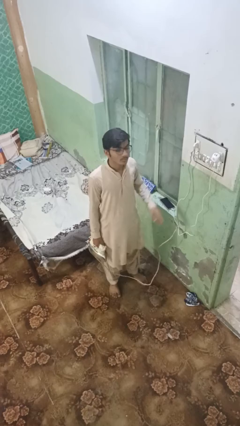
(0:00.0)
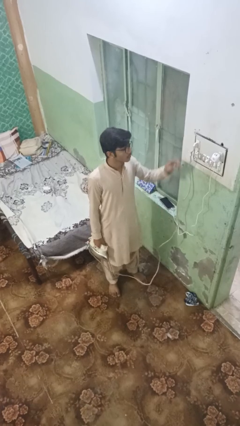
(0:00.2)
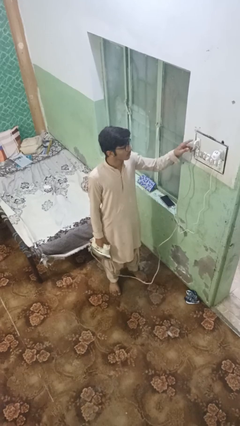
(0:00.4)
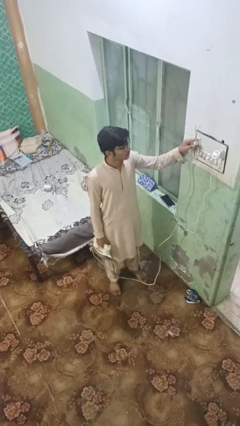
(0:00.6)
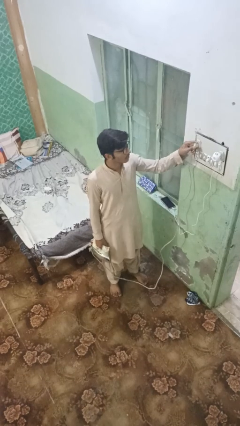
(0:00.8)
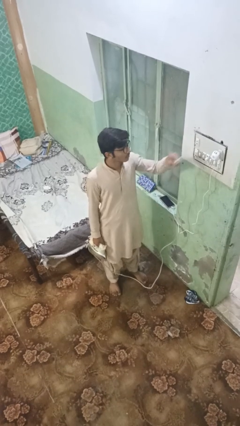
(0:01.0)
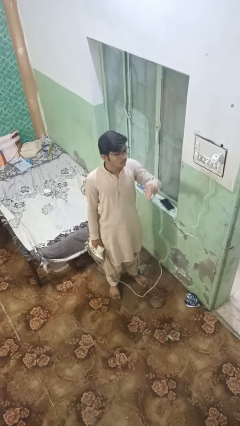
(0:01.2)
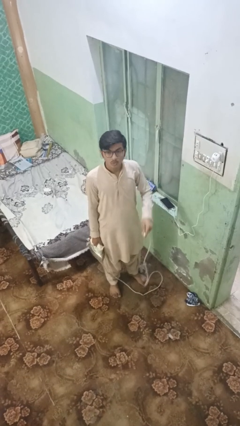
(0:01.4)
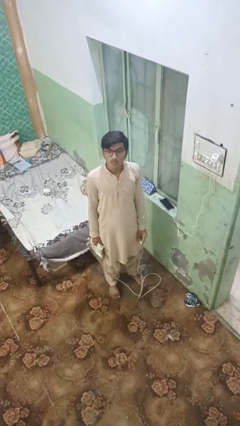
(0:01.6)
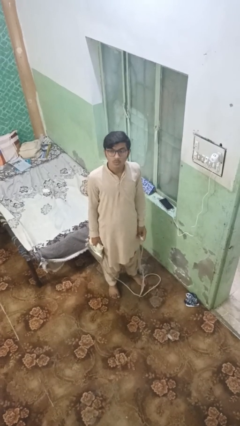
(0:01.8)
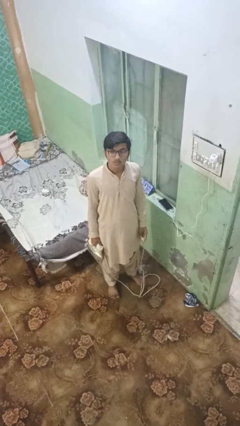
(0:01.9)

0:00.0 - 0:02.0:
person unplugs from electrical socket

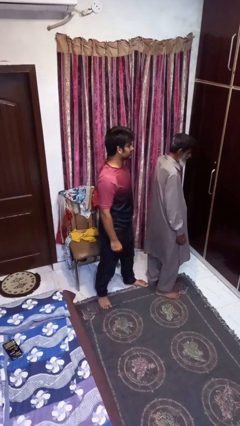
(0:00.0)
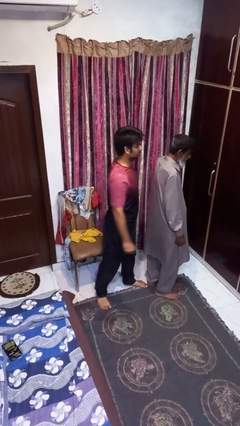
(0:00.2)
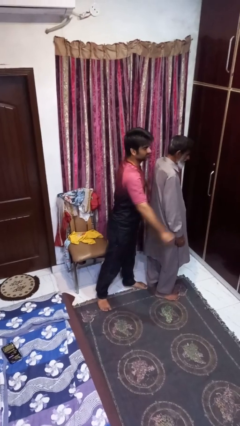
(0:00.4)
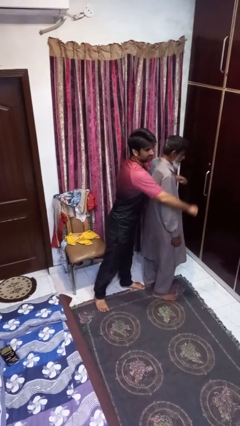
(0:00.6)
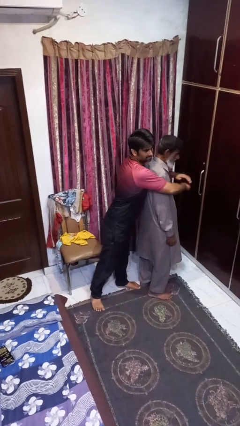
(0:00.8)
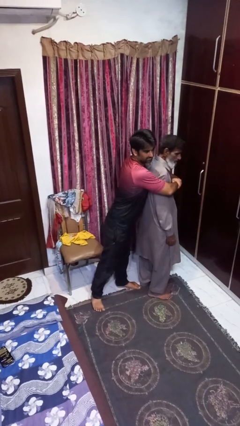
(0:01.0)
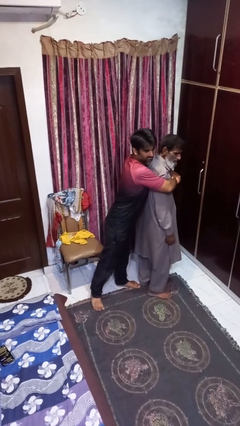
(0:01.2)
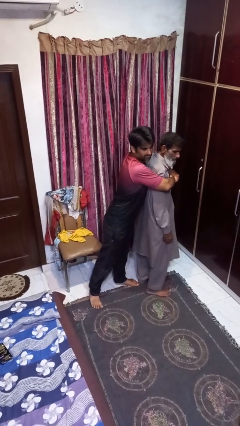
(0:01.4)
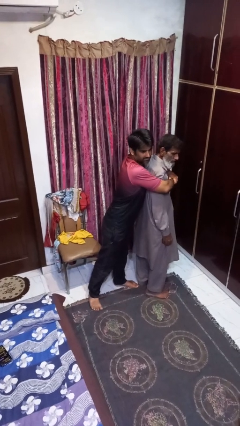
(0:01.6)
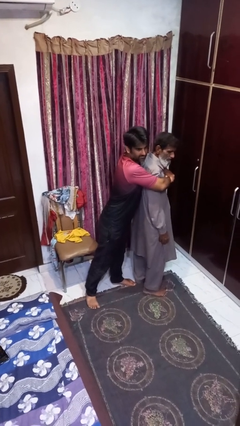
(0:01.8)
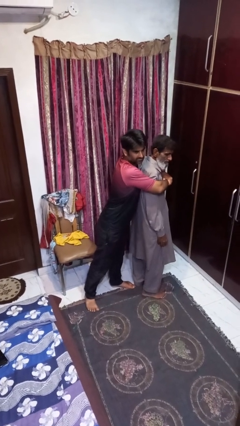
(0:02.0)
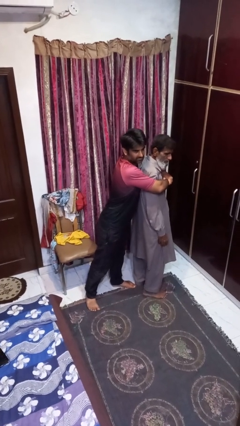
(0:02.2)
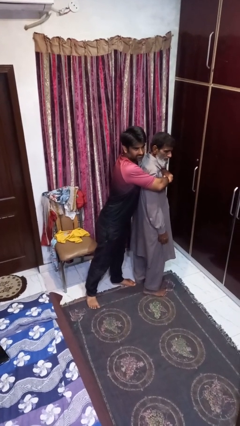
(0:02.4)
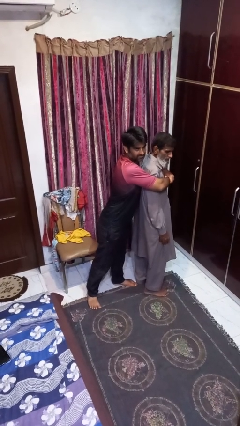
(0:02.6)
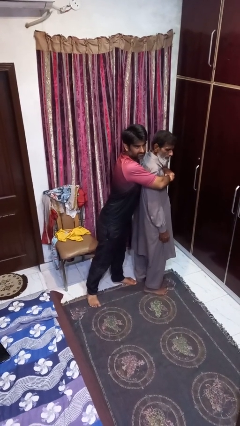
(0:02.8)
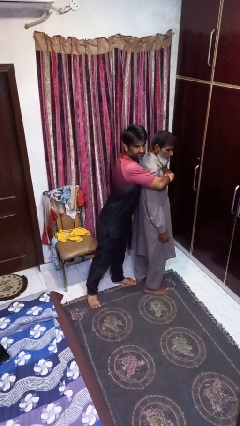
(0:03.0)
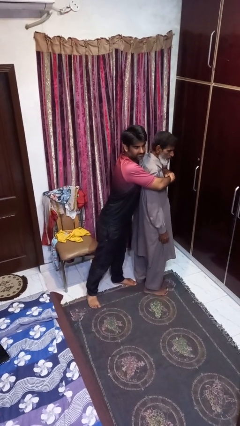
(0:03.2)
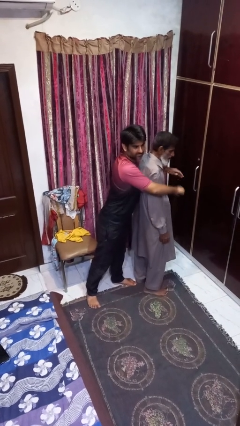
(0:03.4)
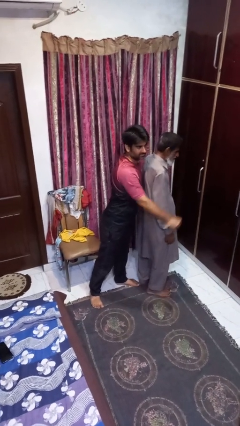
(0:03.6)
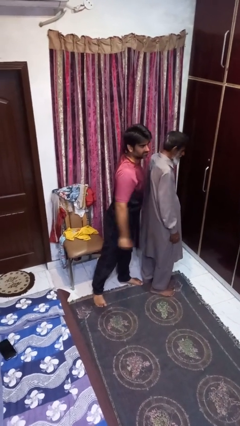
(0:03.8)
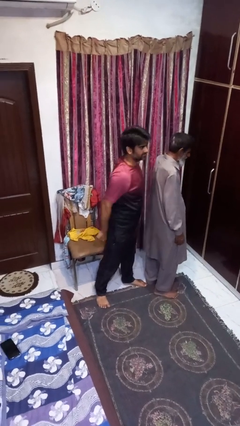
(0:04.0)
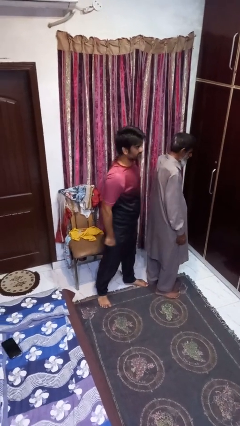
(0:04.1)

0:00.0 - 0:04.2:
person hugs person from behind

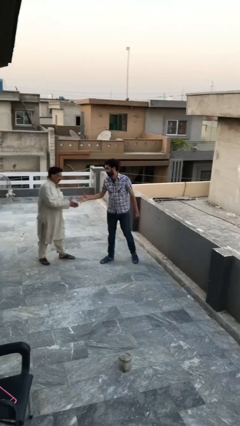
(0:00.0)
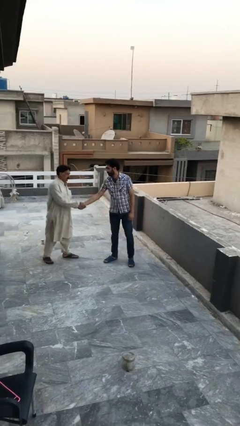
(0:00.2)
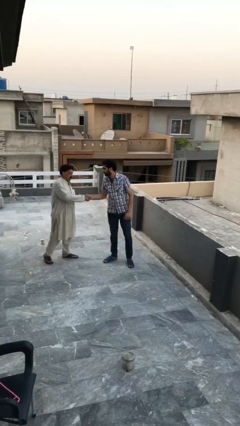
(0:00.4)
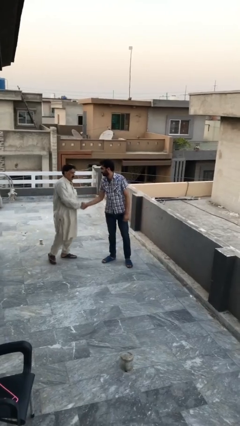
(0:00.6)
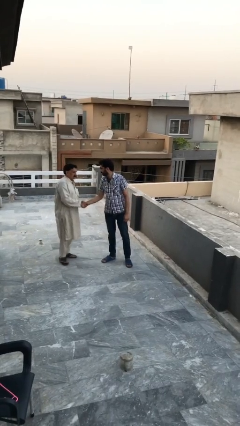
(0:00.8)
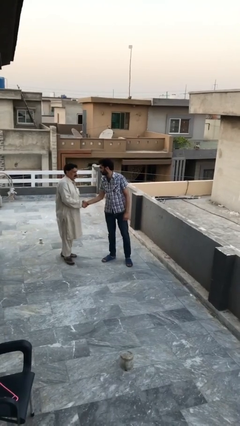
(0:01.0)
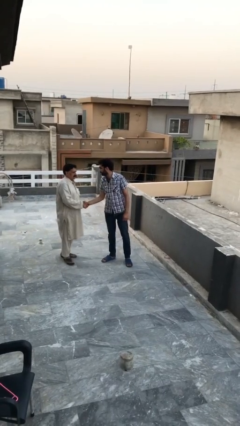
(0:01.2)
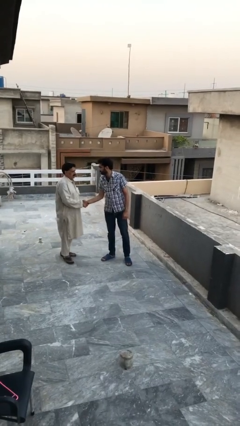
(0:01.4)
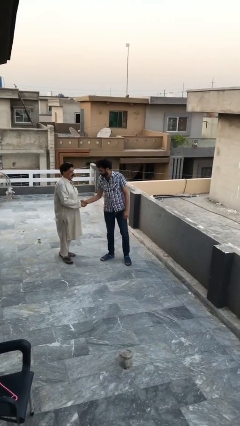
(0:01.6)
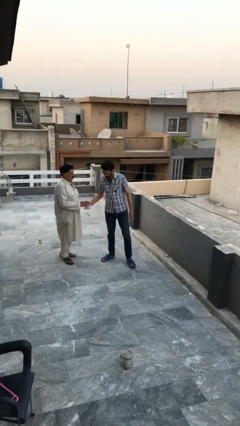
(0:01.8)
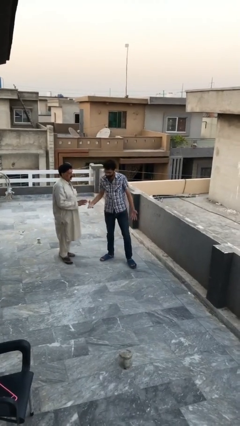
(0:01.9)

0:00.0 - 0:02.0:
person shakes hand

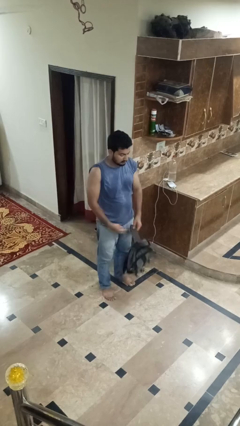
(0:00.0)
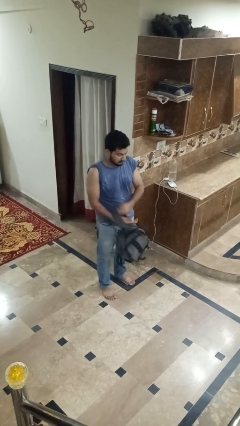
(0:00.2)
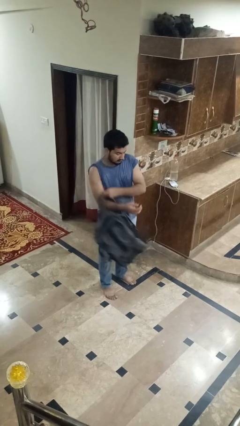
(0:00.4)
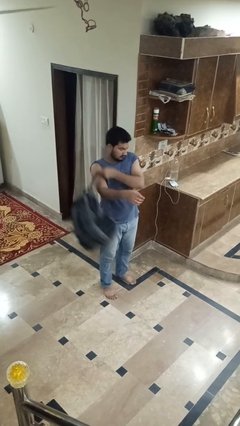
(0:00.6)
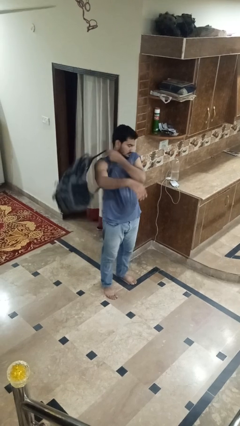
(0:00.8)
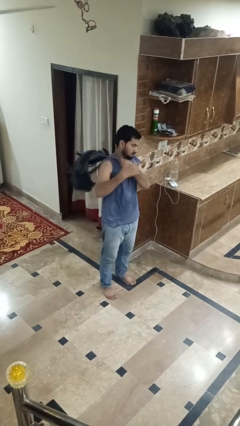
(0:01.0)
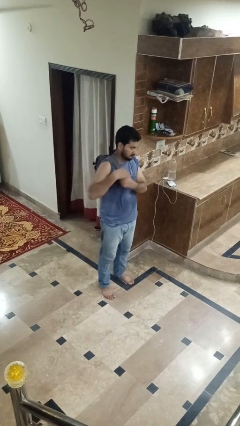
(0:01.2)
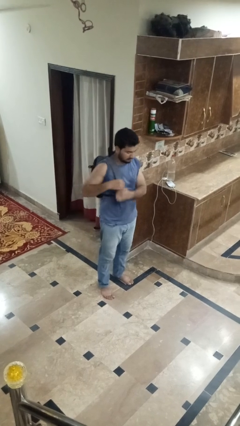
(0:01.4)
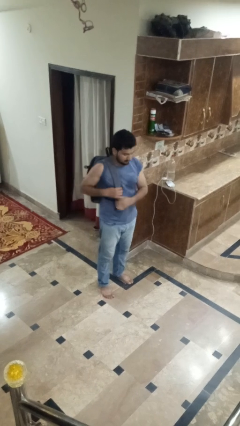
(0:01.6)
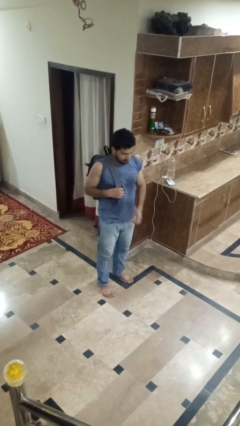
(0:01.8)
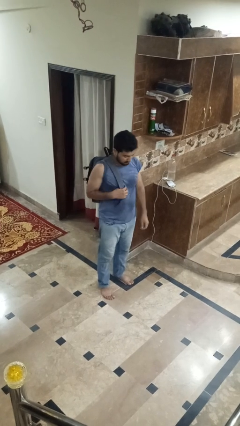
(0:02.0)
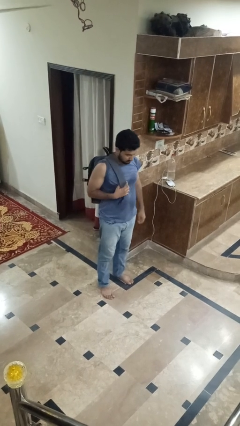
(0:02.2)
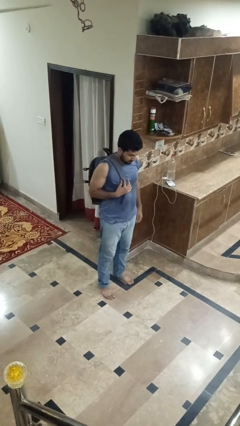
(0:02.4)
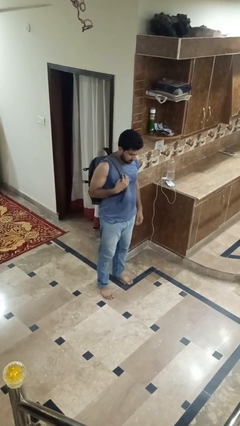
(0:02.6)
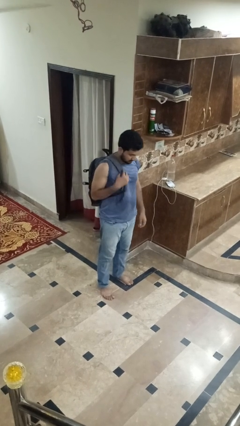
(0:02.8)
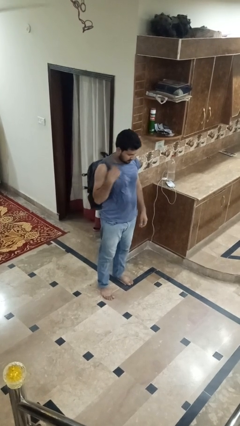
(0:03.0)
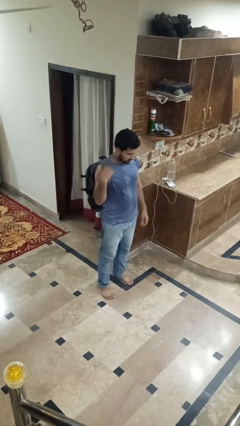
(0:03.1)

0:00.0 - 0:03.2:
person puts on backpack

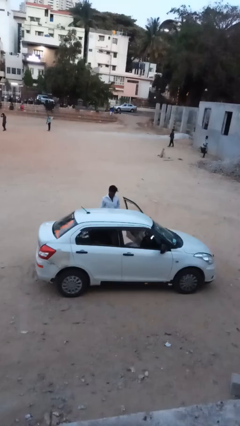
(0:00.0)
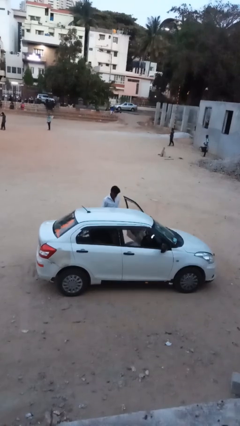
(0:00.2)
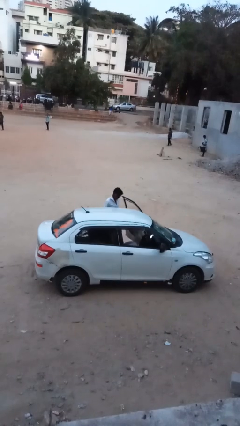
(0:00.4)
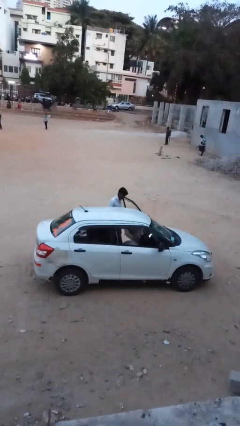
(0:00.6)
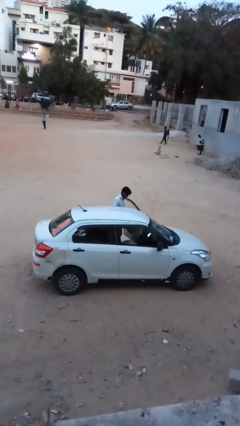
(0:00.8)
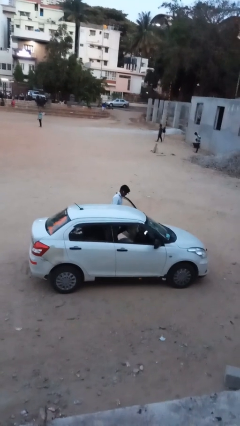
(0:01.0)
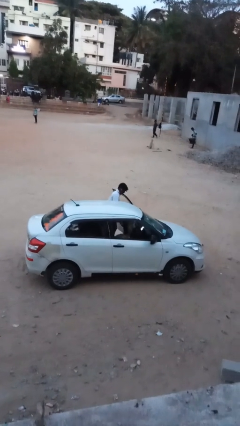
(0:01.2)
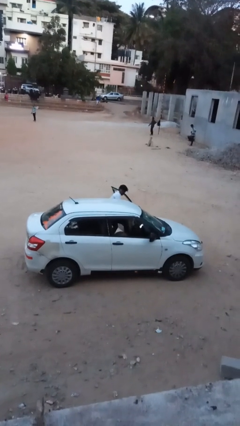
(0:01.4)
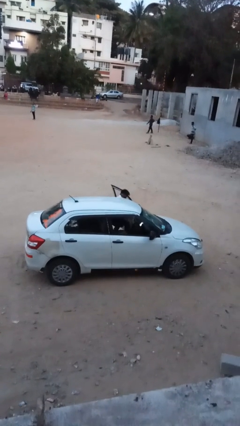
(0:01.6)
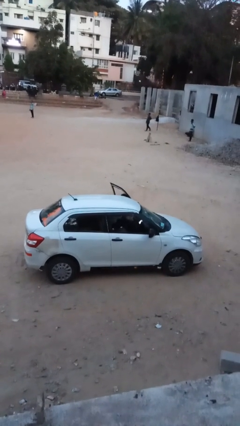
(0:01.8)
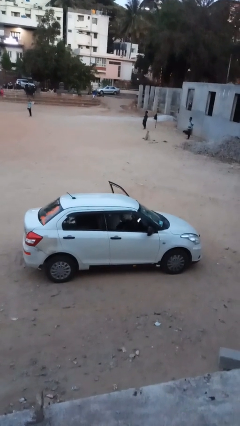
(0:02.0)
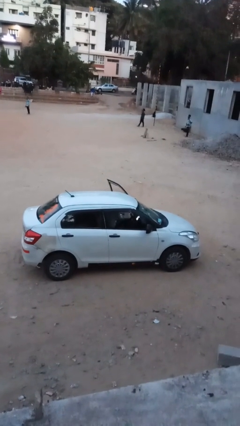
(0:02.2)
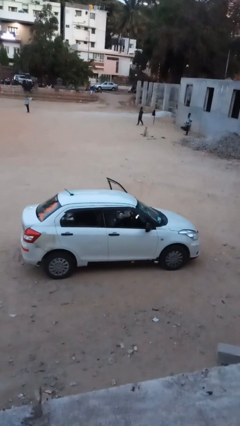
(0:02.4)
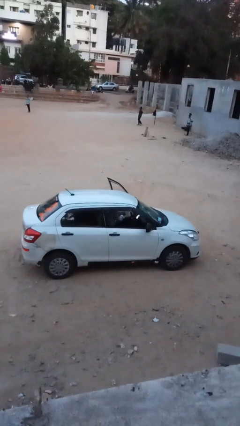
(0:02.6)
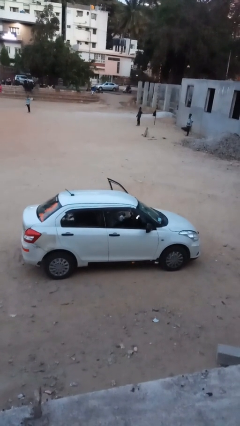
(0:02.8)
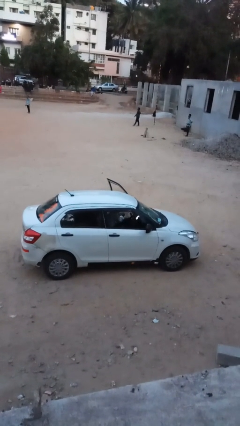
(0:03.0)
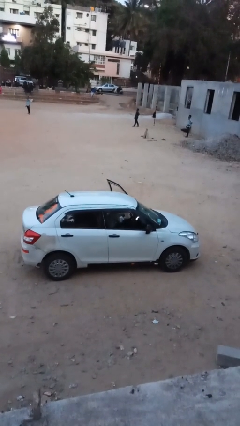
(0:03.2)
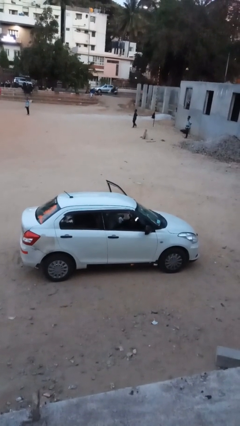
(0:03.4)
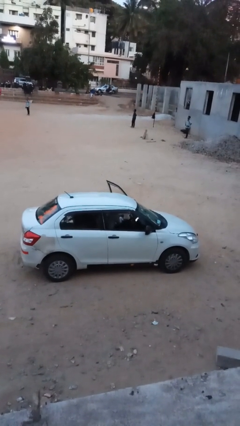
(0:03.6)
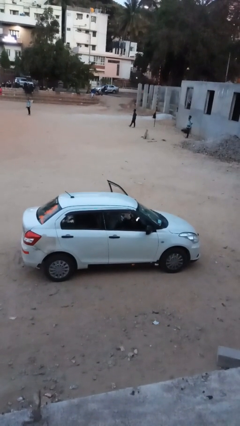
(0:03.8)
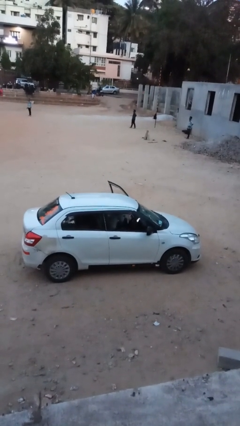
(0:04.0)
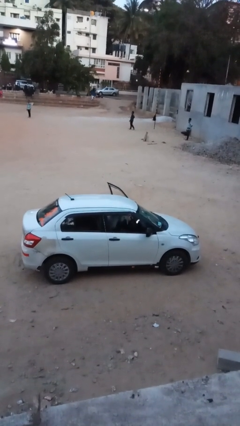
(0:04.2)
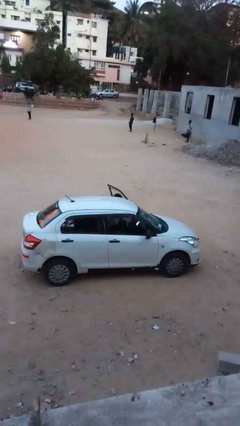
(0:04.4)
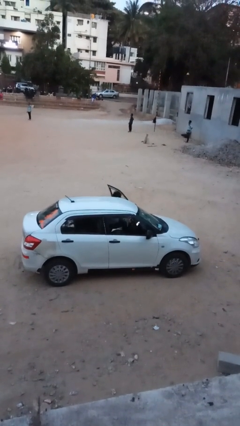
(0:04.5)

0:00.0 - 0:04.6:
person enters car

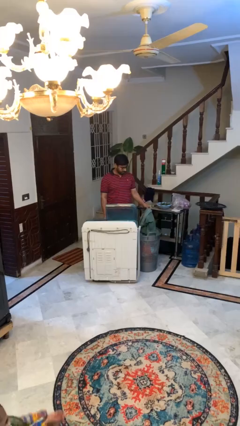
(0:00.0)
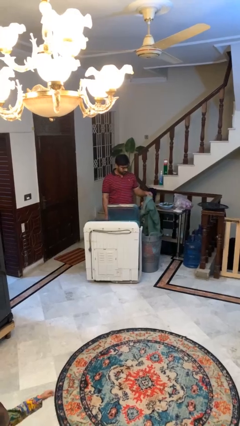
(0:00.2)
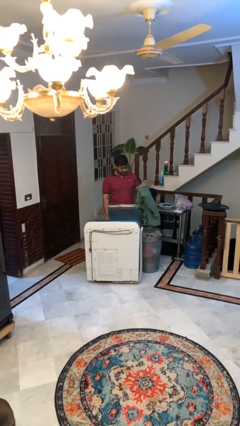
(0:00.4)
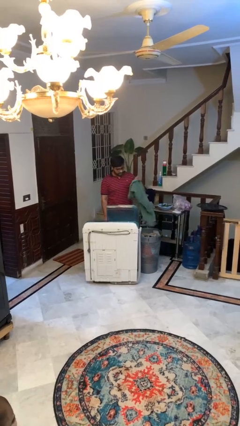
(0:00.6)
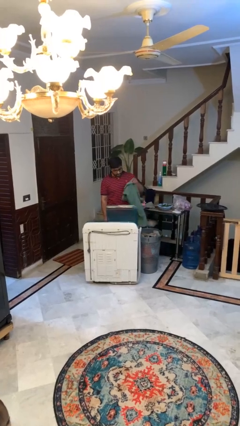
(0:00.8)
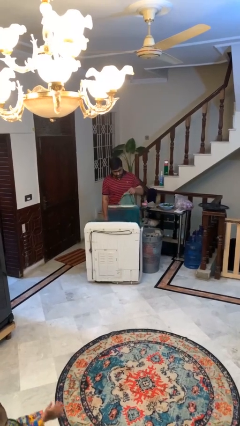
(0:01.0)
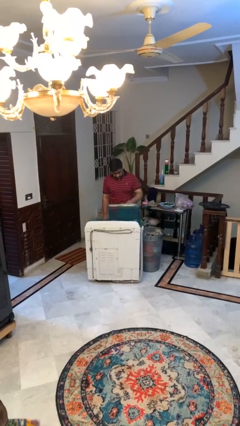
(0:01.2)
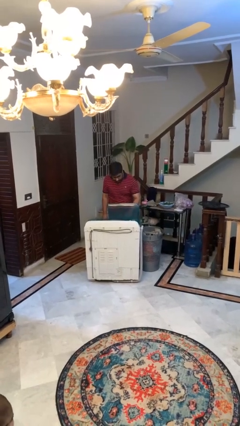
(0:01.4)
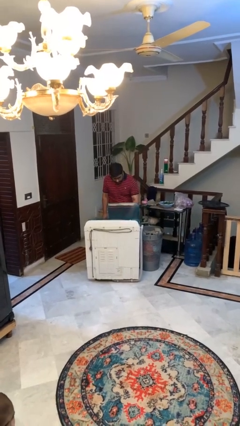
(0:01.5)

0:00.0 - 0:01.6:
person loads clotheswasher
